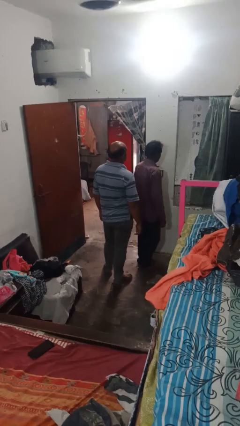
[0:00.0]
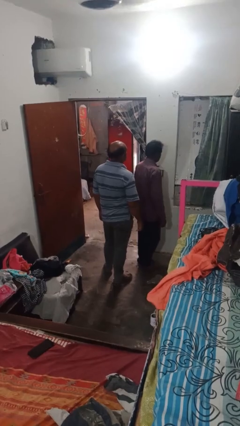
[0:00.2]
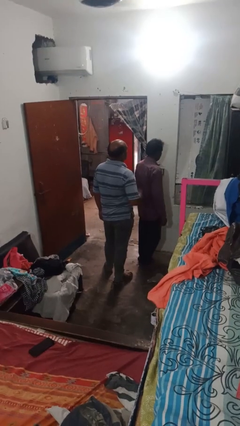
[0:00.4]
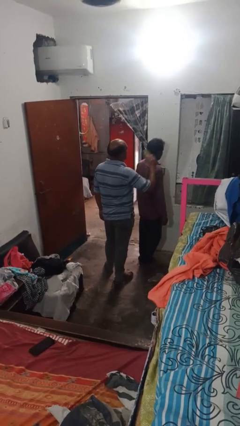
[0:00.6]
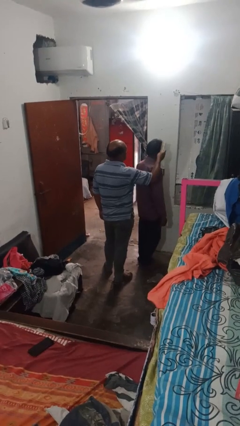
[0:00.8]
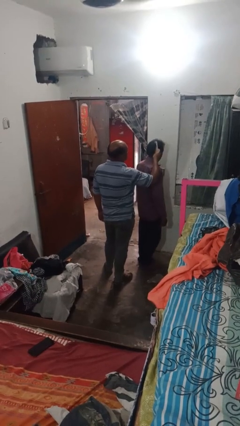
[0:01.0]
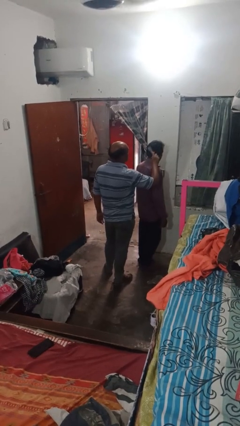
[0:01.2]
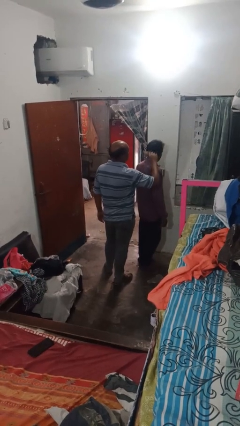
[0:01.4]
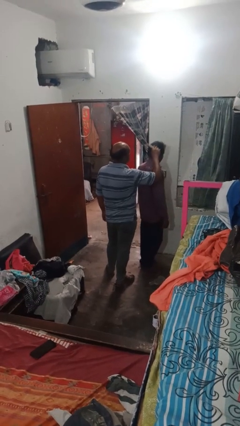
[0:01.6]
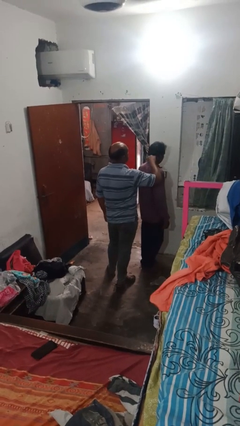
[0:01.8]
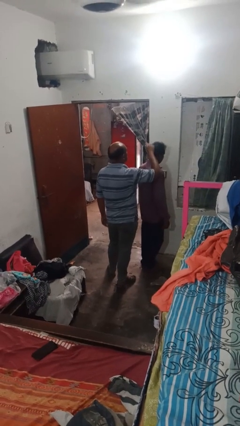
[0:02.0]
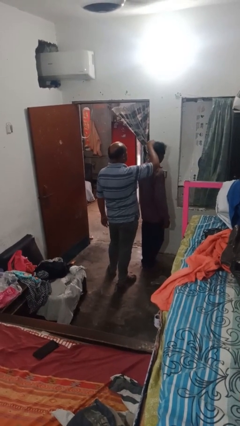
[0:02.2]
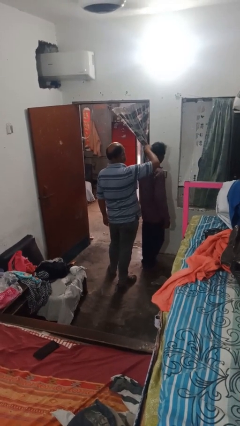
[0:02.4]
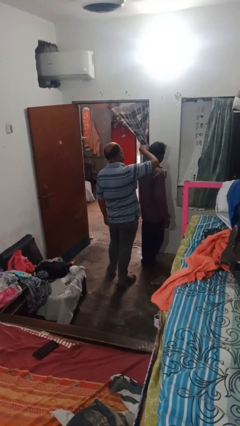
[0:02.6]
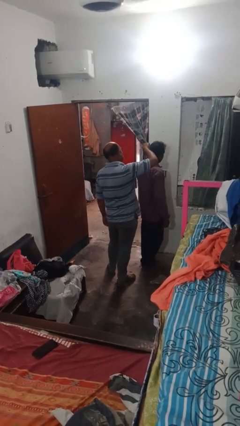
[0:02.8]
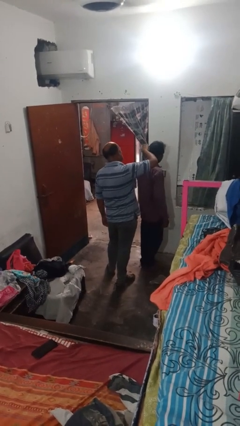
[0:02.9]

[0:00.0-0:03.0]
person brushes hair of person

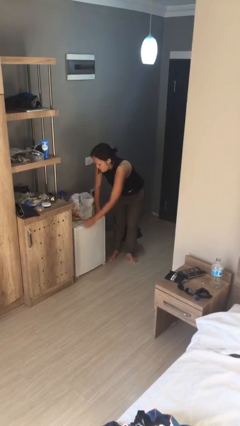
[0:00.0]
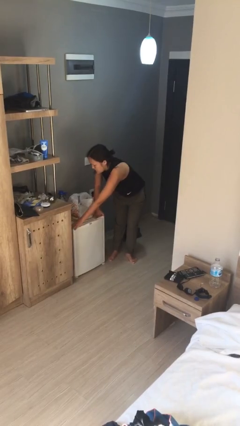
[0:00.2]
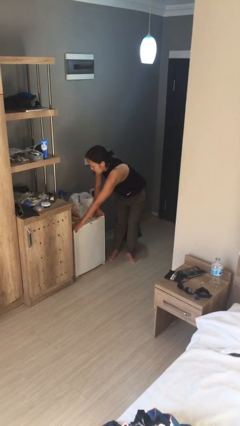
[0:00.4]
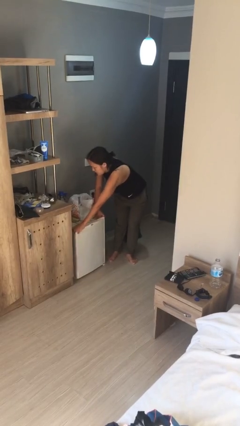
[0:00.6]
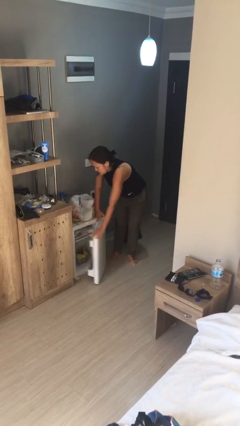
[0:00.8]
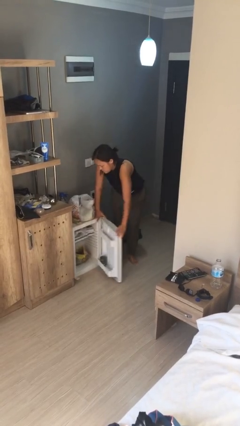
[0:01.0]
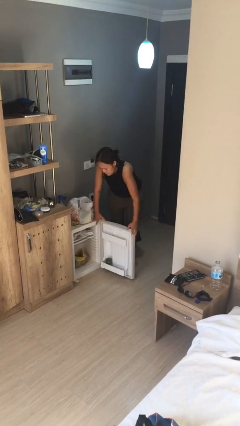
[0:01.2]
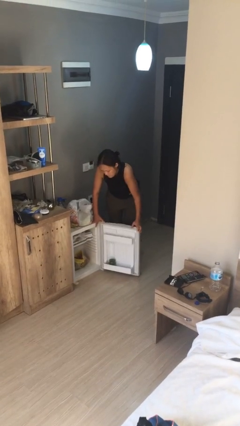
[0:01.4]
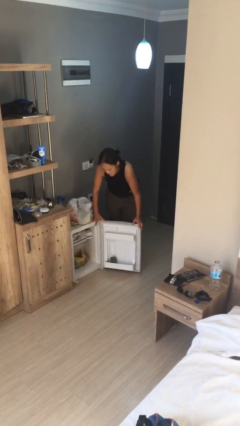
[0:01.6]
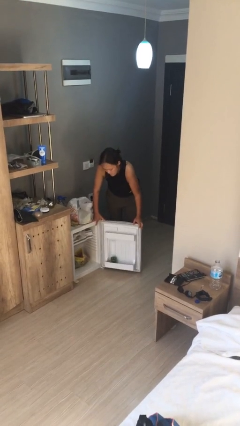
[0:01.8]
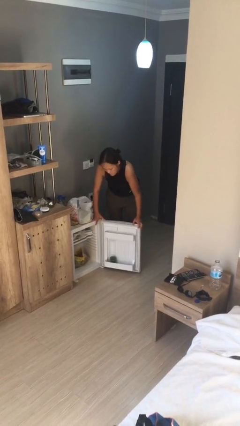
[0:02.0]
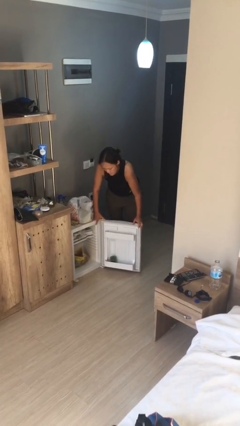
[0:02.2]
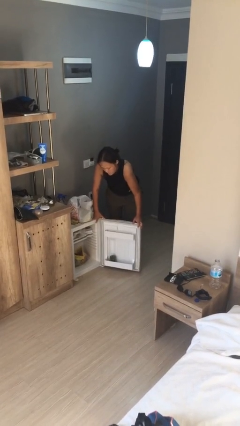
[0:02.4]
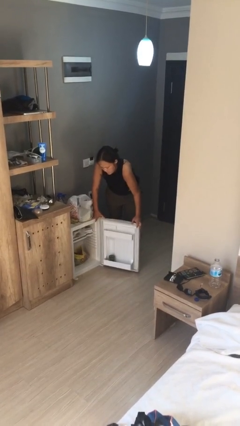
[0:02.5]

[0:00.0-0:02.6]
person opens refrigerator

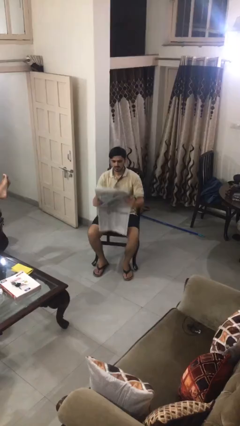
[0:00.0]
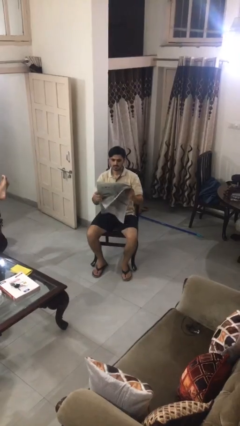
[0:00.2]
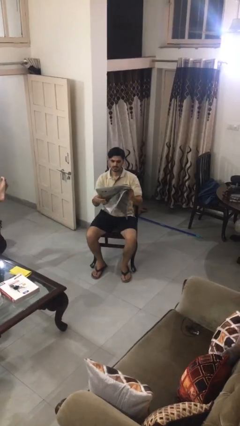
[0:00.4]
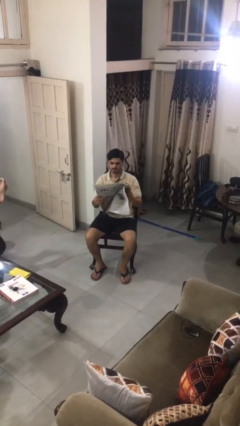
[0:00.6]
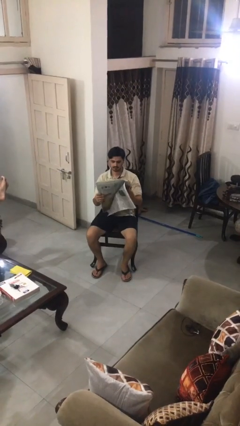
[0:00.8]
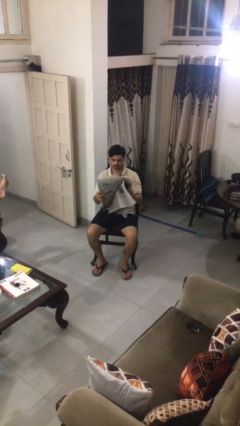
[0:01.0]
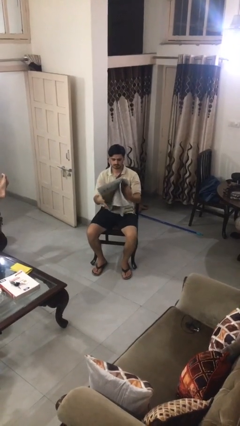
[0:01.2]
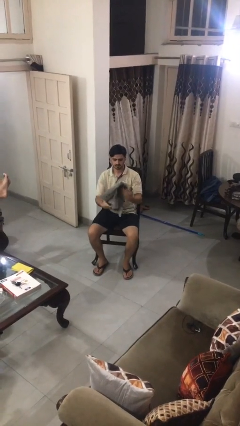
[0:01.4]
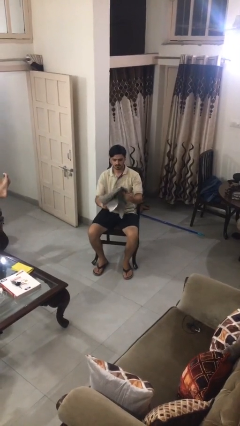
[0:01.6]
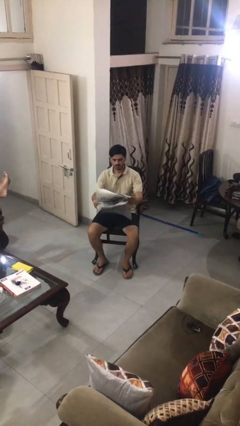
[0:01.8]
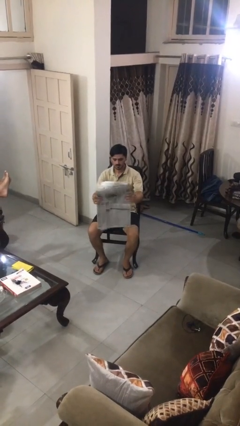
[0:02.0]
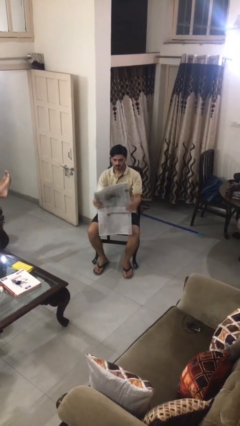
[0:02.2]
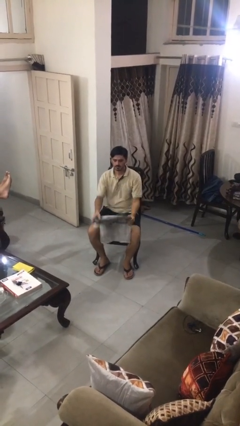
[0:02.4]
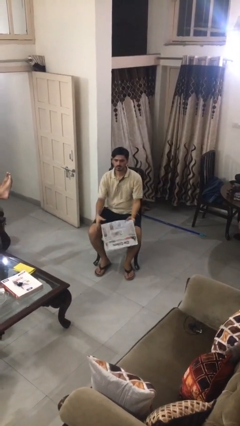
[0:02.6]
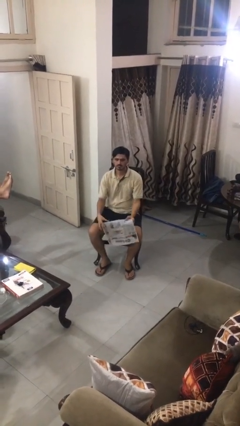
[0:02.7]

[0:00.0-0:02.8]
person reads newspaper

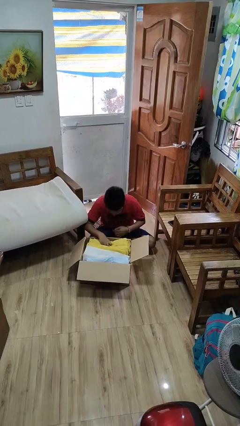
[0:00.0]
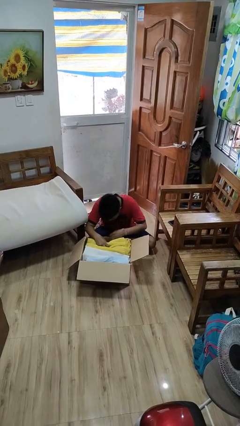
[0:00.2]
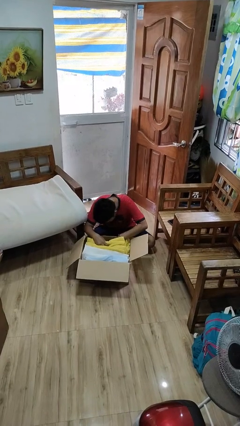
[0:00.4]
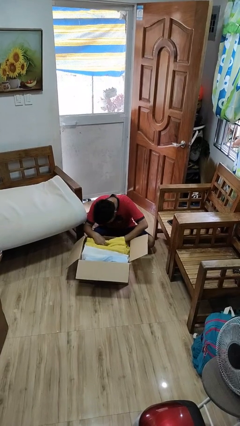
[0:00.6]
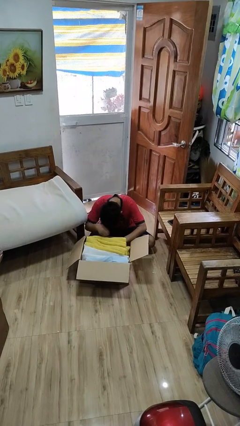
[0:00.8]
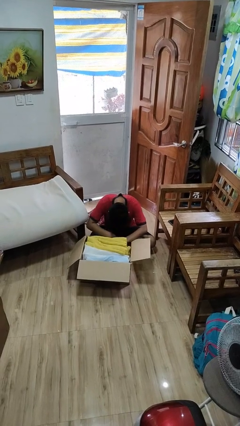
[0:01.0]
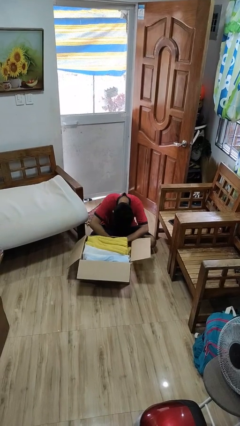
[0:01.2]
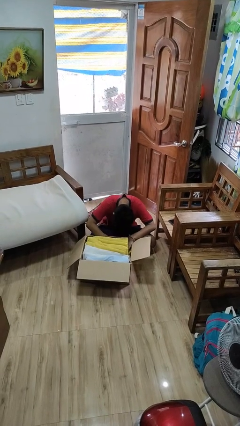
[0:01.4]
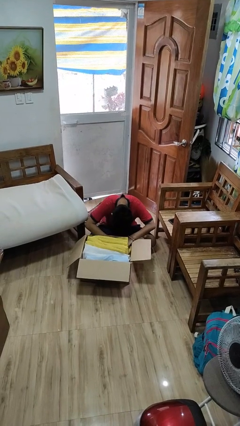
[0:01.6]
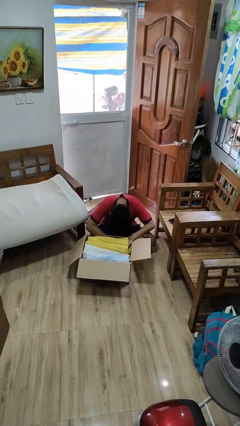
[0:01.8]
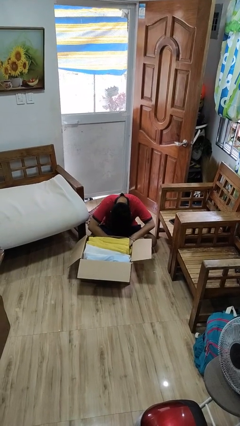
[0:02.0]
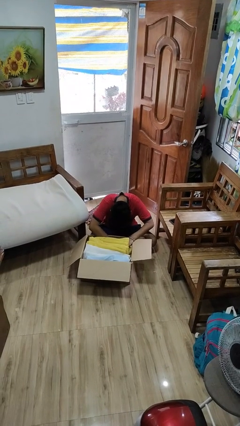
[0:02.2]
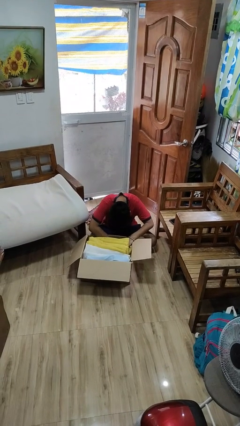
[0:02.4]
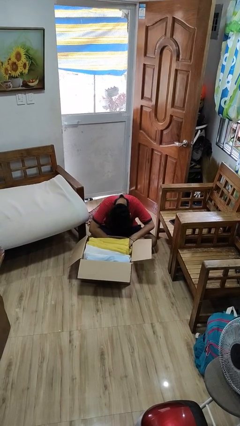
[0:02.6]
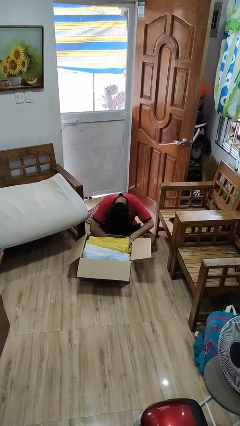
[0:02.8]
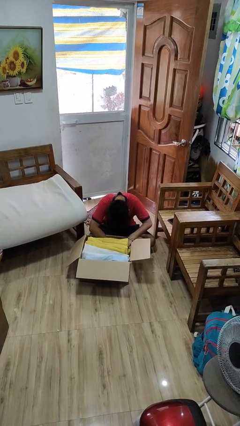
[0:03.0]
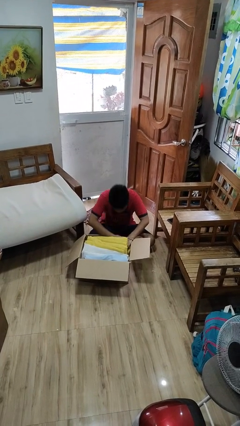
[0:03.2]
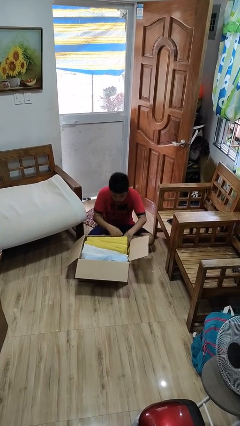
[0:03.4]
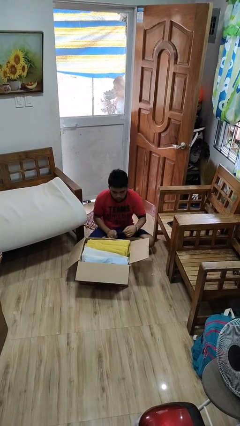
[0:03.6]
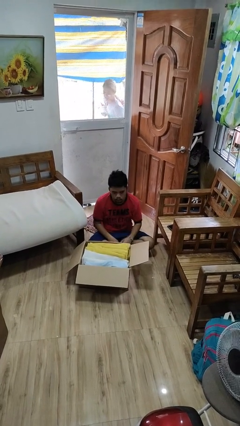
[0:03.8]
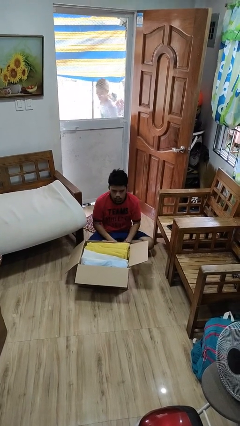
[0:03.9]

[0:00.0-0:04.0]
person searches in box

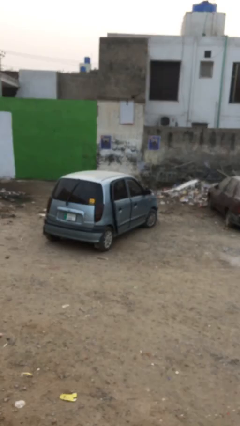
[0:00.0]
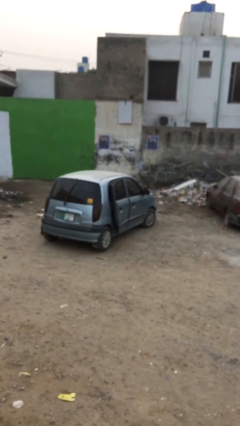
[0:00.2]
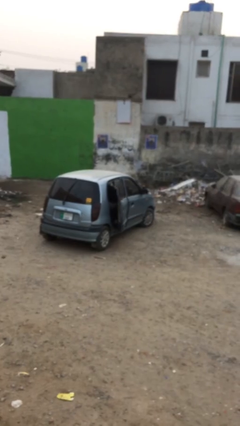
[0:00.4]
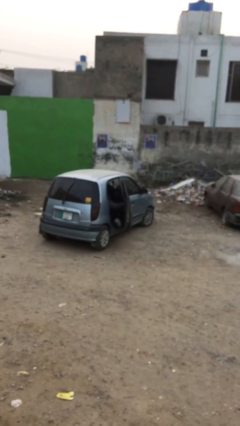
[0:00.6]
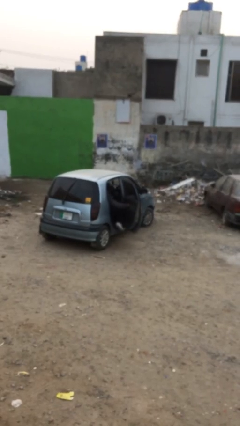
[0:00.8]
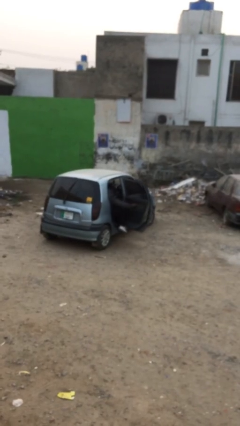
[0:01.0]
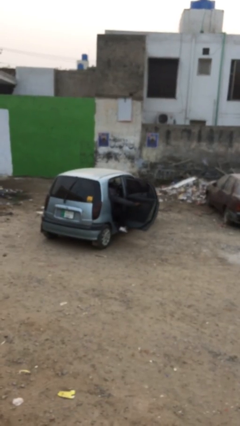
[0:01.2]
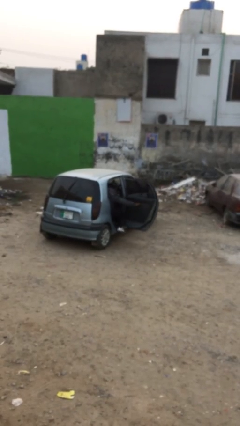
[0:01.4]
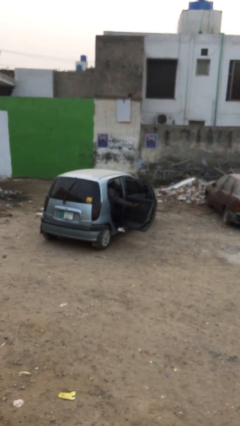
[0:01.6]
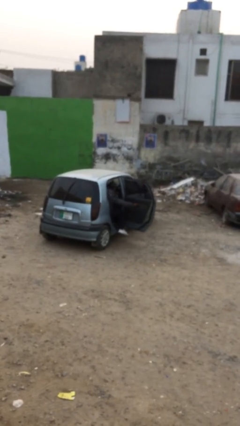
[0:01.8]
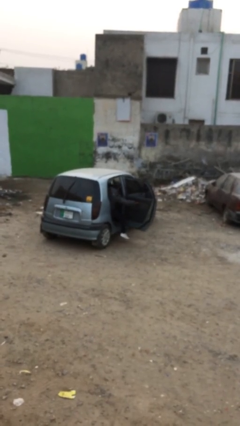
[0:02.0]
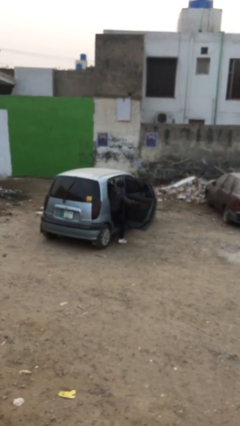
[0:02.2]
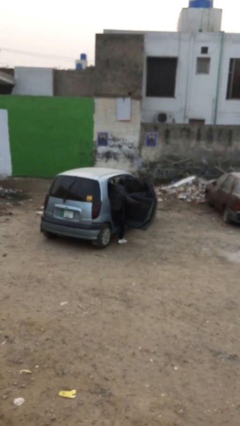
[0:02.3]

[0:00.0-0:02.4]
person opens car door

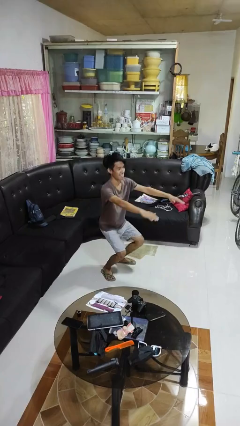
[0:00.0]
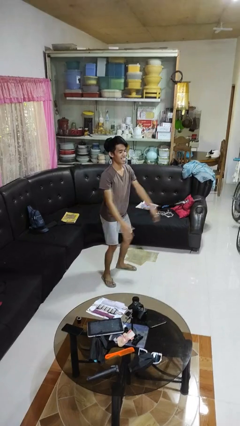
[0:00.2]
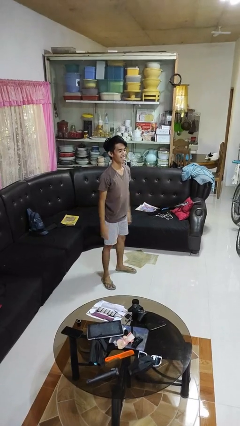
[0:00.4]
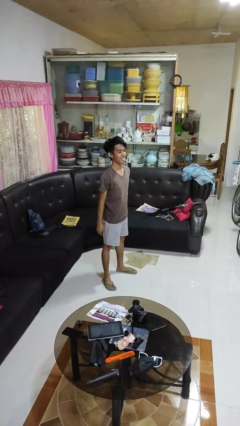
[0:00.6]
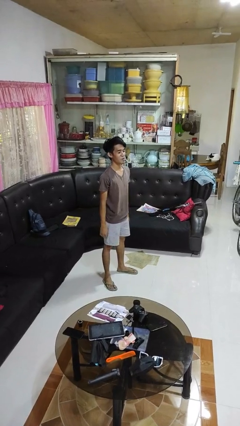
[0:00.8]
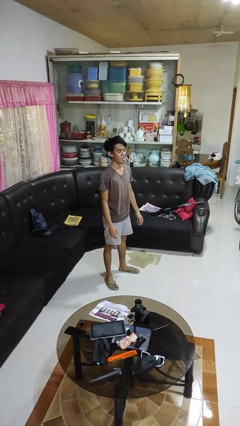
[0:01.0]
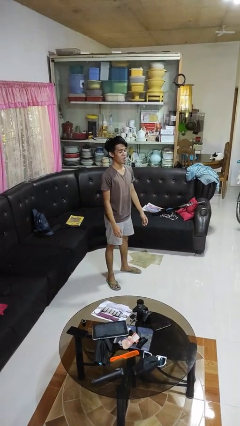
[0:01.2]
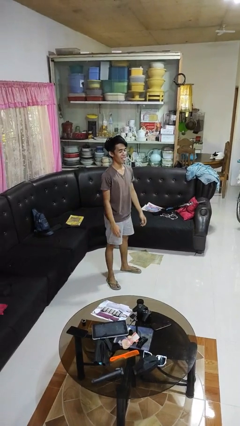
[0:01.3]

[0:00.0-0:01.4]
person stands up

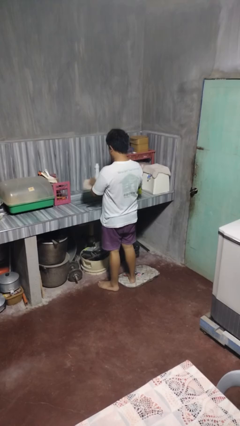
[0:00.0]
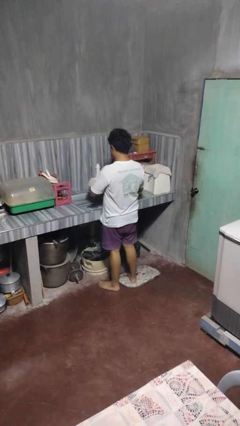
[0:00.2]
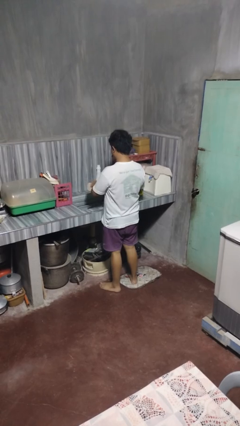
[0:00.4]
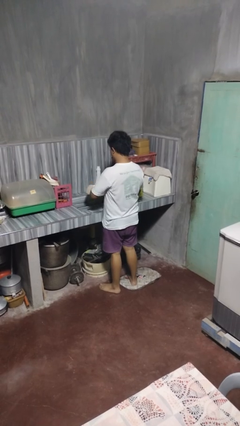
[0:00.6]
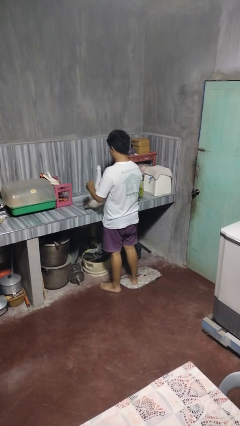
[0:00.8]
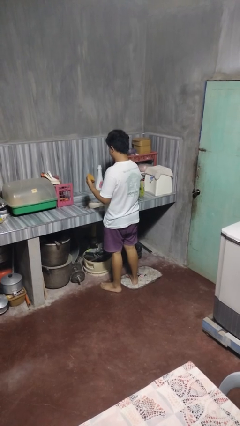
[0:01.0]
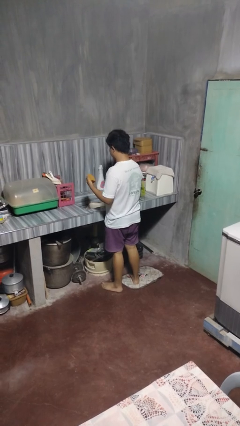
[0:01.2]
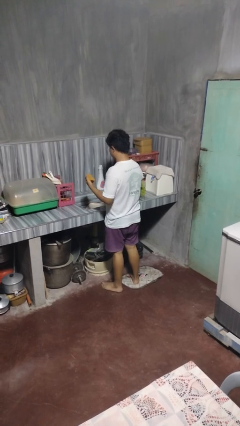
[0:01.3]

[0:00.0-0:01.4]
person washes dish
